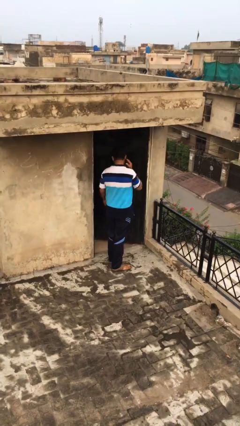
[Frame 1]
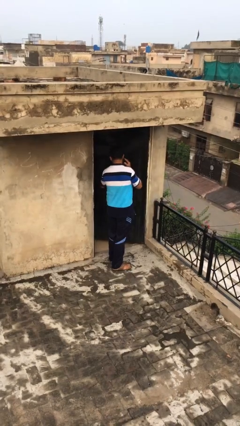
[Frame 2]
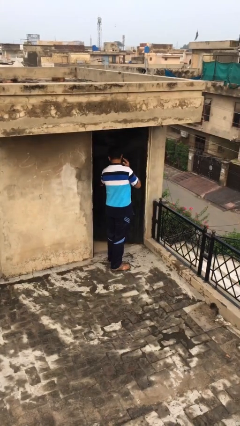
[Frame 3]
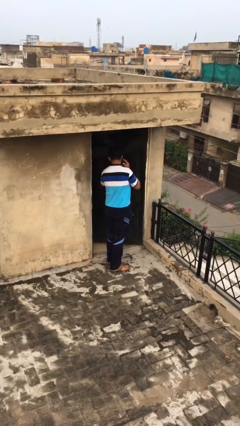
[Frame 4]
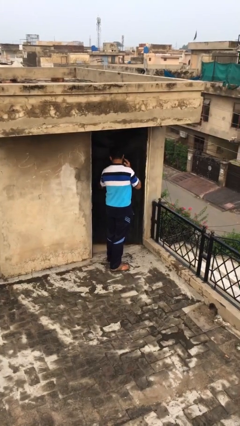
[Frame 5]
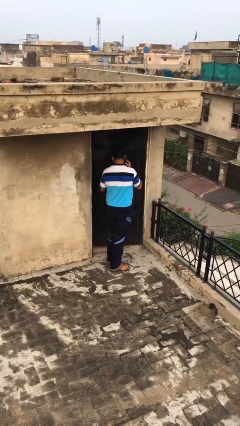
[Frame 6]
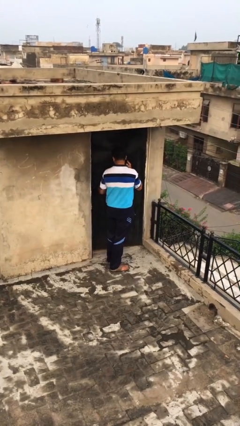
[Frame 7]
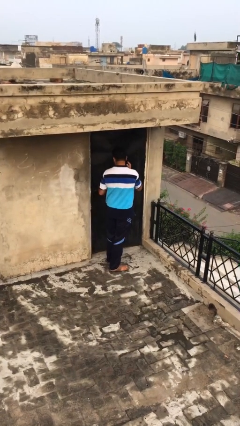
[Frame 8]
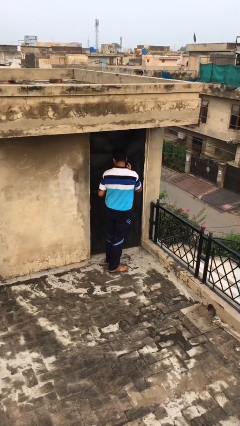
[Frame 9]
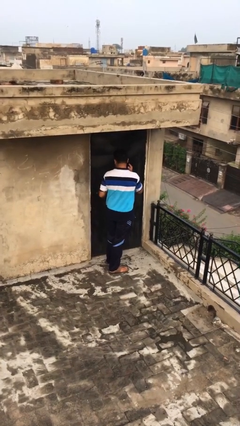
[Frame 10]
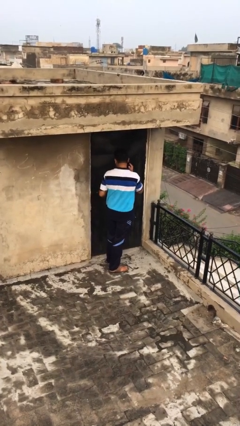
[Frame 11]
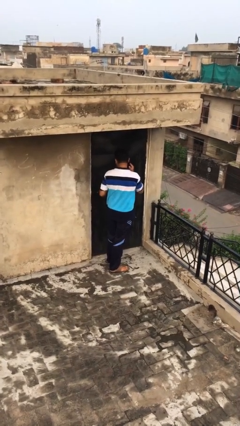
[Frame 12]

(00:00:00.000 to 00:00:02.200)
person closes facility door

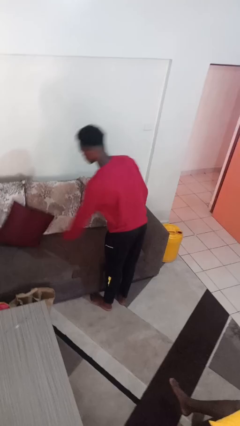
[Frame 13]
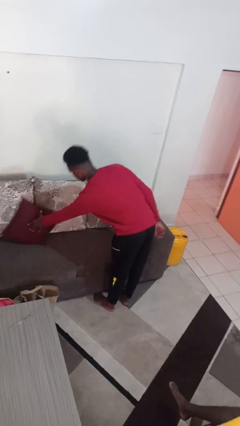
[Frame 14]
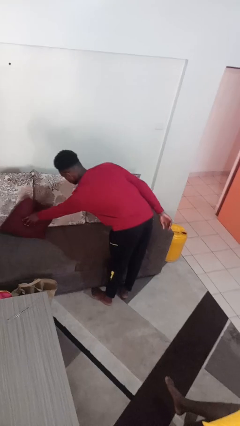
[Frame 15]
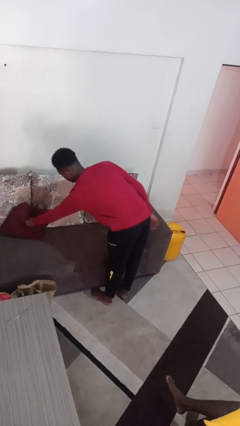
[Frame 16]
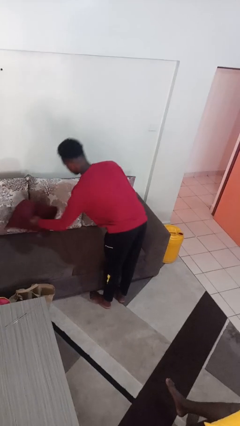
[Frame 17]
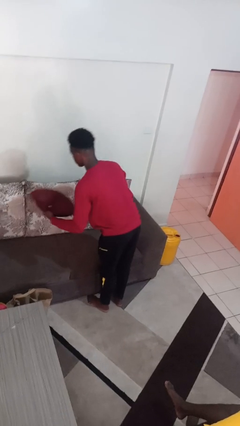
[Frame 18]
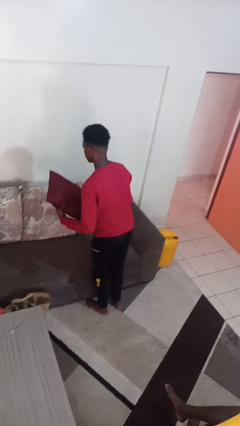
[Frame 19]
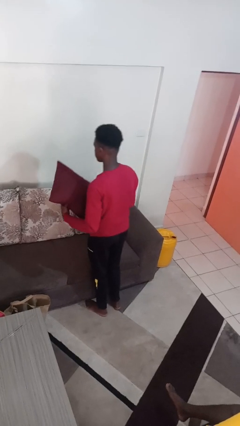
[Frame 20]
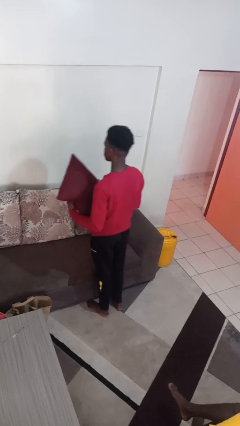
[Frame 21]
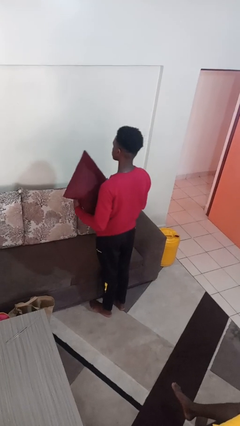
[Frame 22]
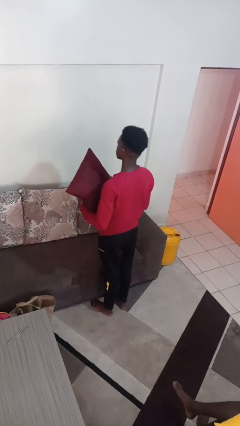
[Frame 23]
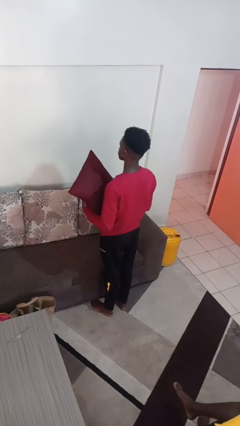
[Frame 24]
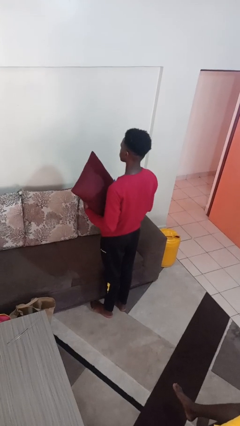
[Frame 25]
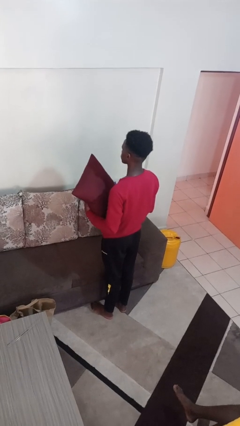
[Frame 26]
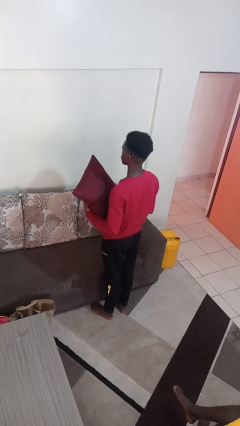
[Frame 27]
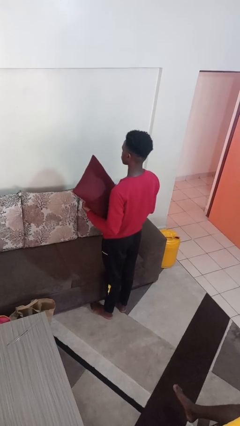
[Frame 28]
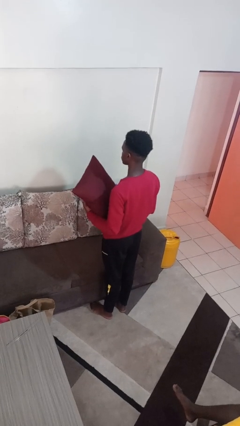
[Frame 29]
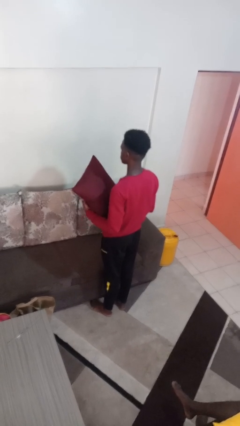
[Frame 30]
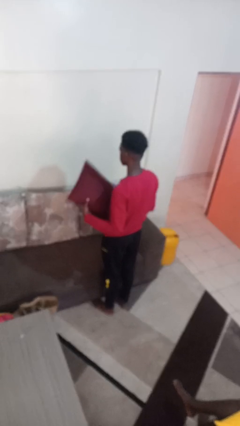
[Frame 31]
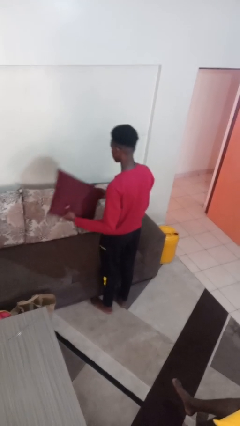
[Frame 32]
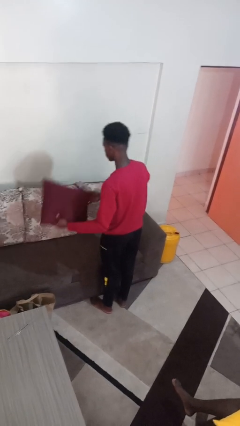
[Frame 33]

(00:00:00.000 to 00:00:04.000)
person picks up object from couch

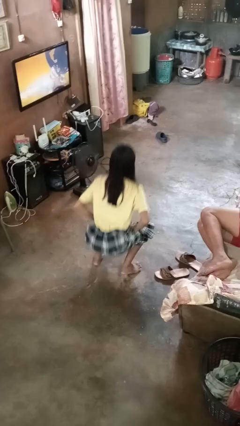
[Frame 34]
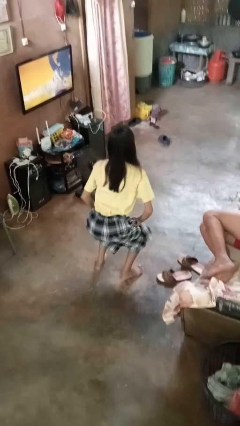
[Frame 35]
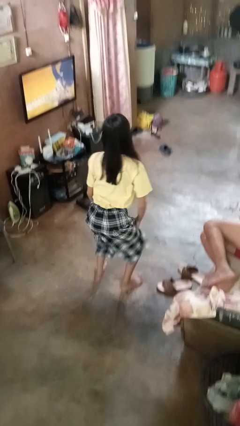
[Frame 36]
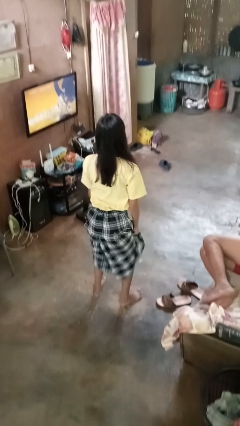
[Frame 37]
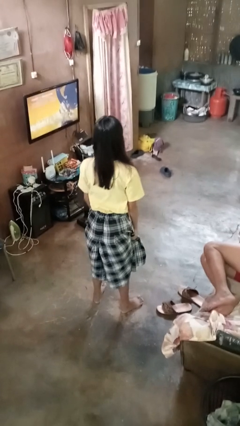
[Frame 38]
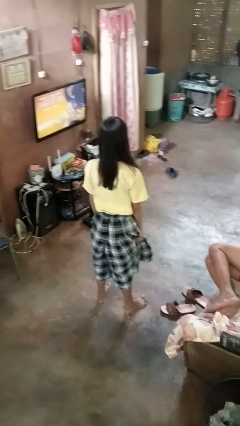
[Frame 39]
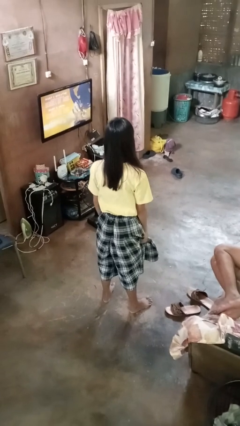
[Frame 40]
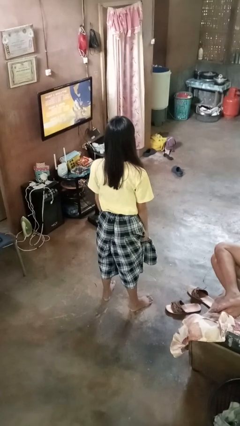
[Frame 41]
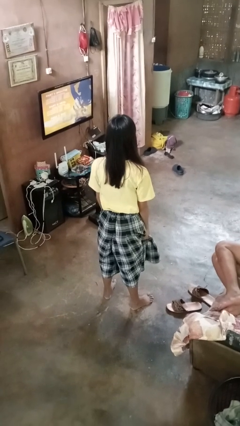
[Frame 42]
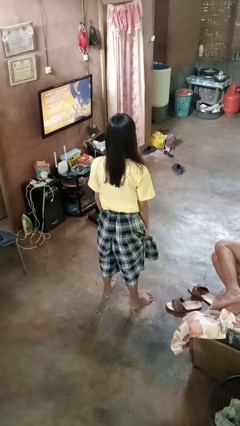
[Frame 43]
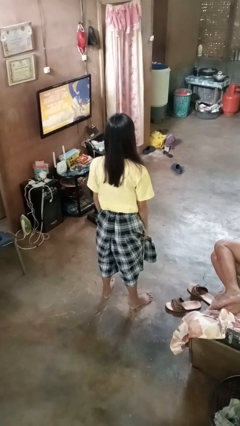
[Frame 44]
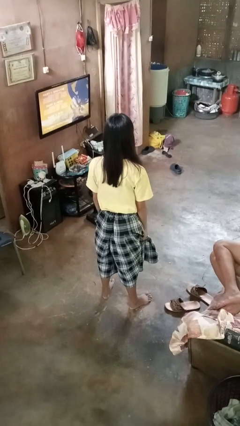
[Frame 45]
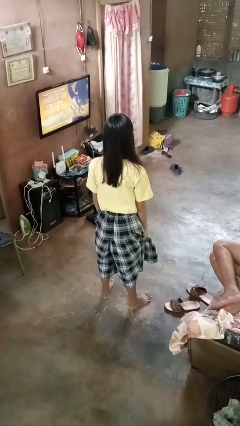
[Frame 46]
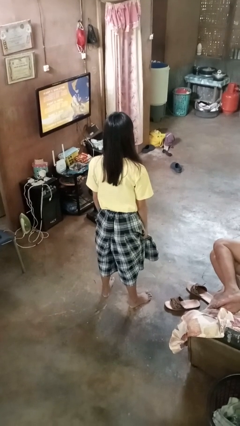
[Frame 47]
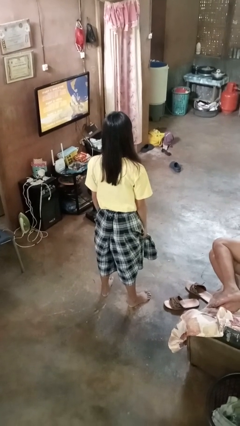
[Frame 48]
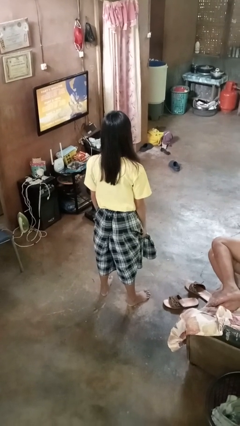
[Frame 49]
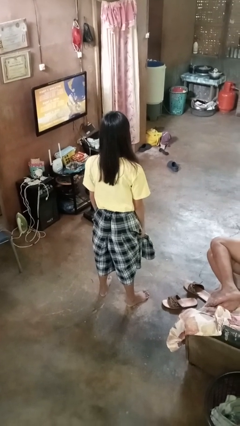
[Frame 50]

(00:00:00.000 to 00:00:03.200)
person stands up

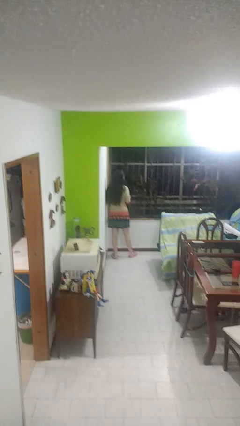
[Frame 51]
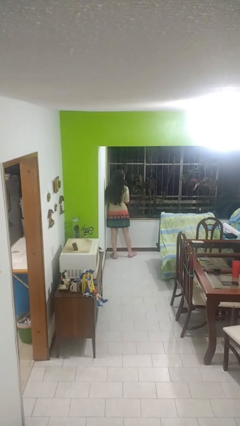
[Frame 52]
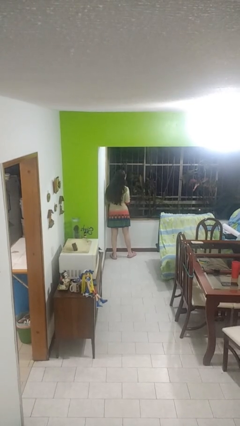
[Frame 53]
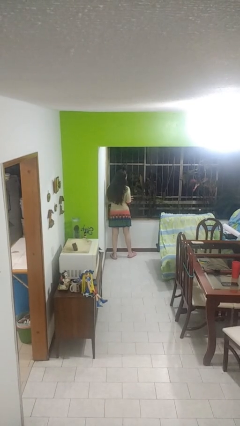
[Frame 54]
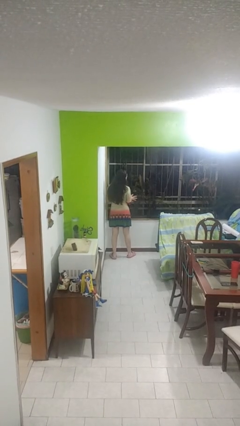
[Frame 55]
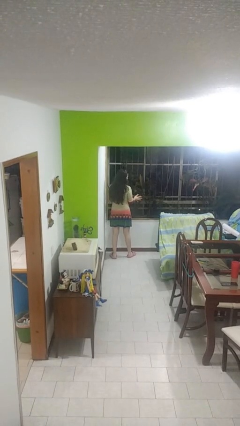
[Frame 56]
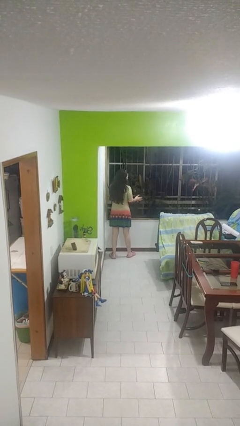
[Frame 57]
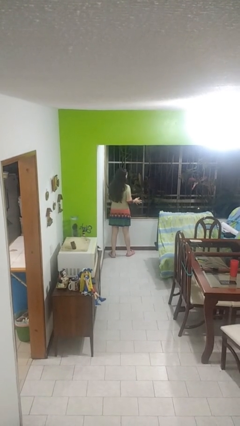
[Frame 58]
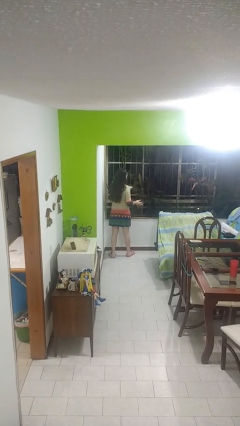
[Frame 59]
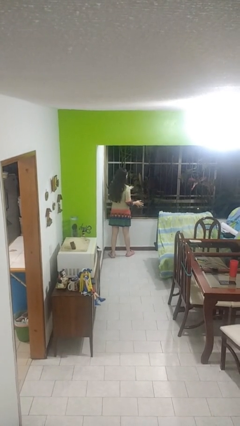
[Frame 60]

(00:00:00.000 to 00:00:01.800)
person opens home window

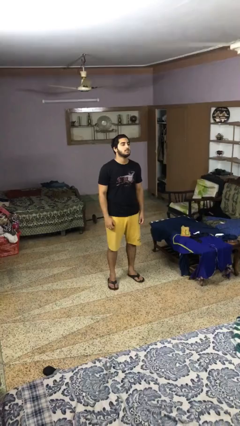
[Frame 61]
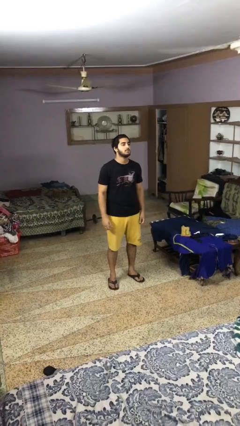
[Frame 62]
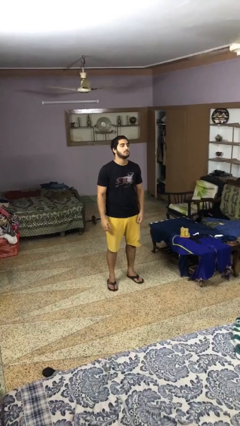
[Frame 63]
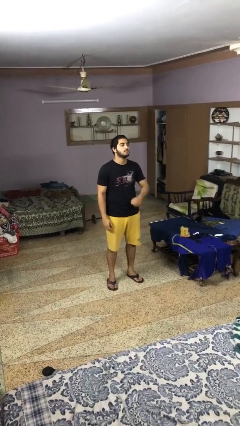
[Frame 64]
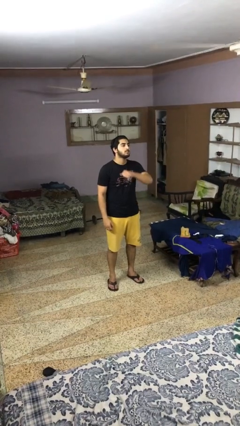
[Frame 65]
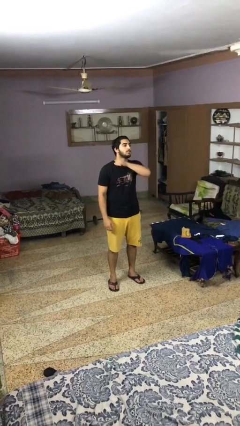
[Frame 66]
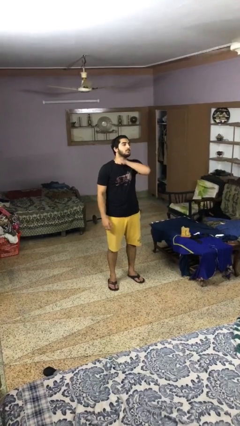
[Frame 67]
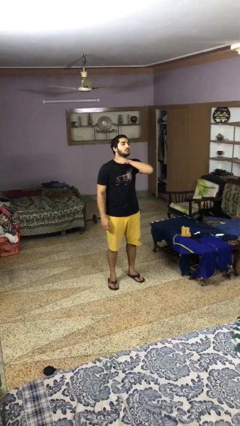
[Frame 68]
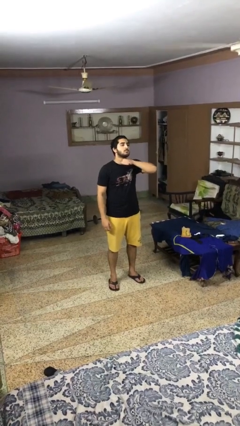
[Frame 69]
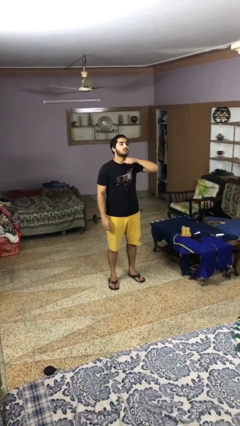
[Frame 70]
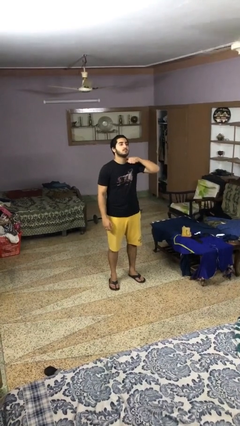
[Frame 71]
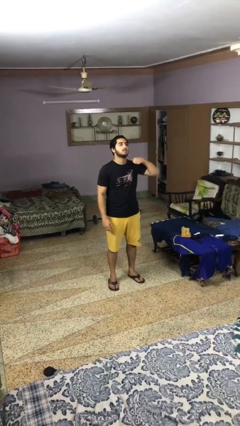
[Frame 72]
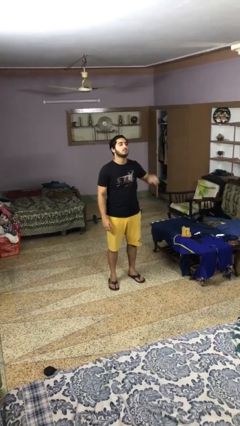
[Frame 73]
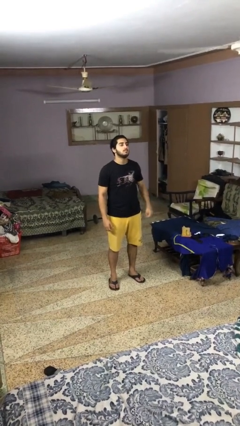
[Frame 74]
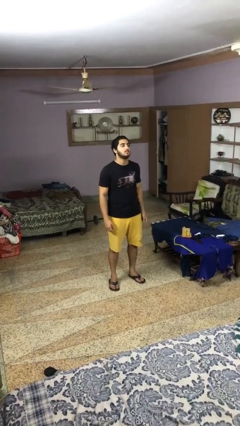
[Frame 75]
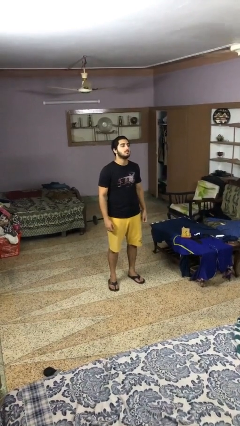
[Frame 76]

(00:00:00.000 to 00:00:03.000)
person gestures cut

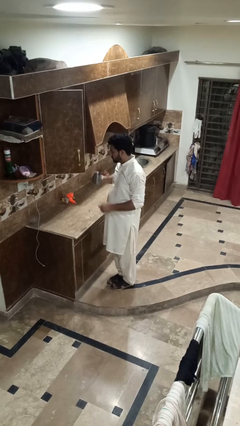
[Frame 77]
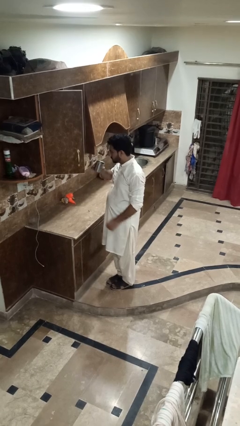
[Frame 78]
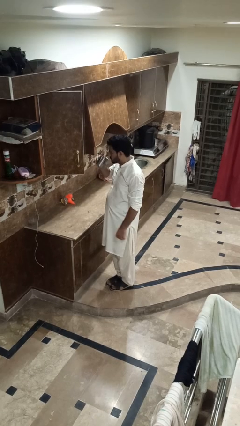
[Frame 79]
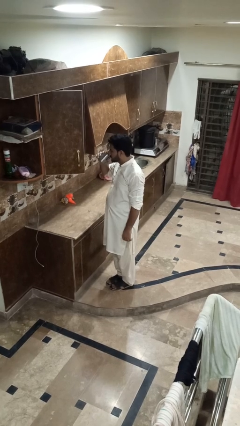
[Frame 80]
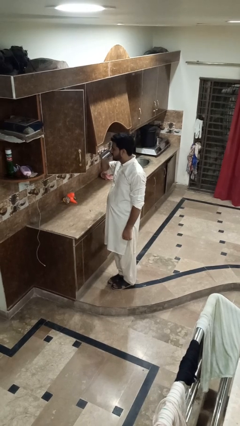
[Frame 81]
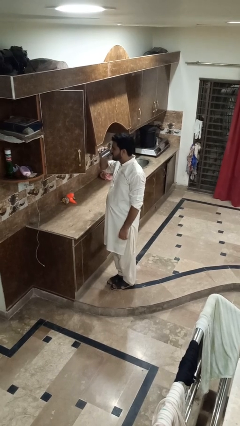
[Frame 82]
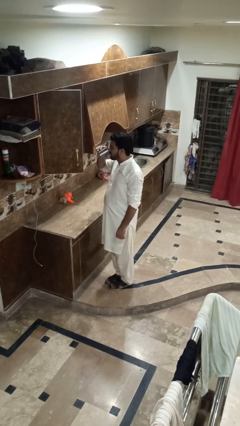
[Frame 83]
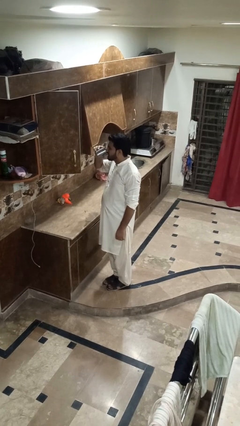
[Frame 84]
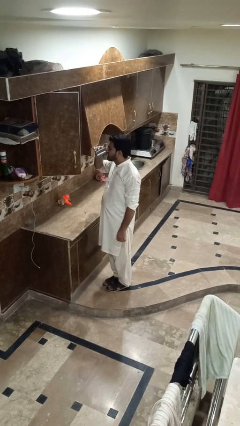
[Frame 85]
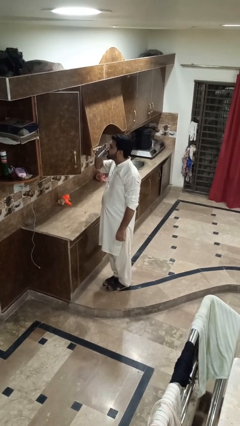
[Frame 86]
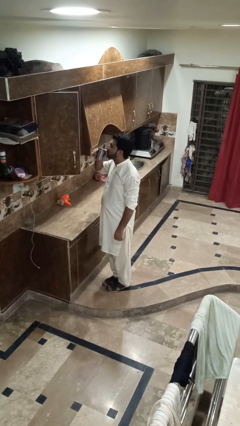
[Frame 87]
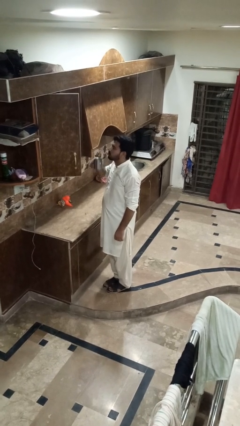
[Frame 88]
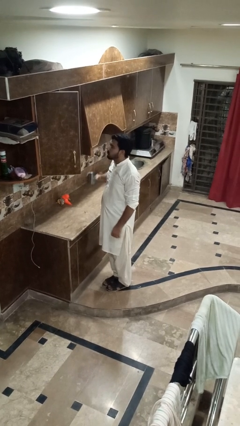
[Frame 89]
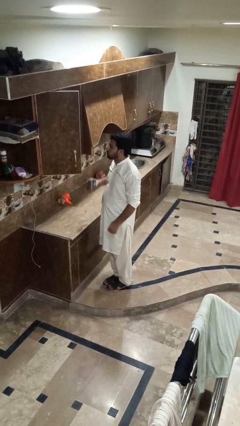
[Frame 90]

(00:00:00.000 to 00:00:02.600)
person drinks from cup

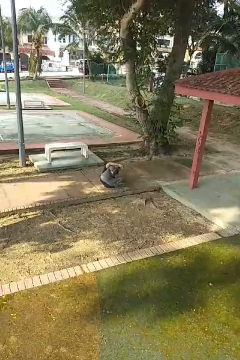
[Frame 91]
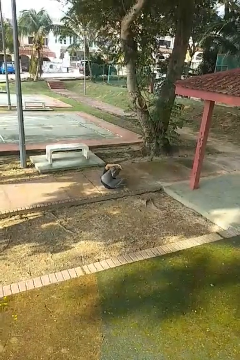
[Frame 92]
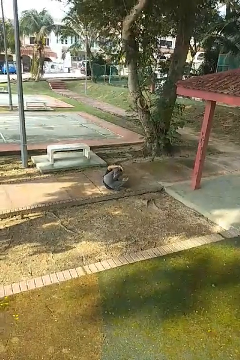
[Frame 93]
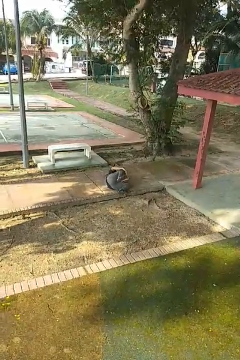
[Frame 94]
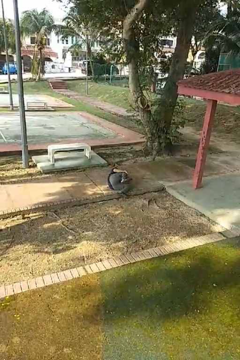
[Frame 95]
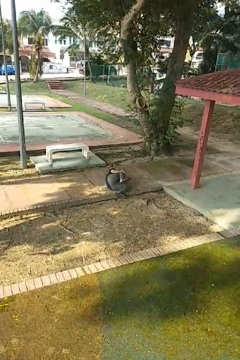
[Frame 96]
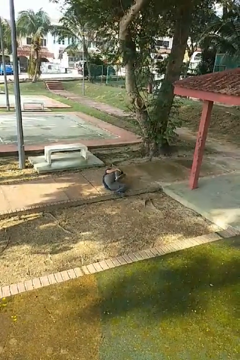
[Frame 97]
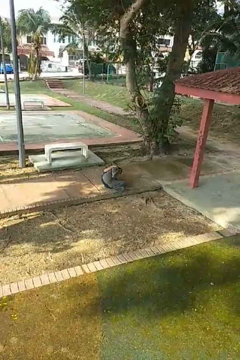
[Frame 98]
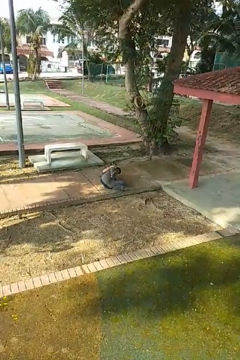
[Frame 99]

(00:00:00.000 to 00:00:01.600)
person lies down on floor
